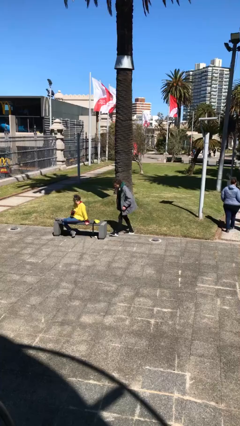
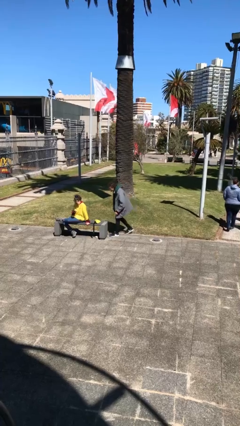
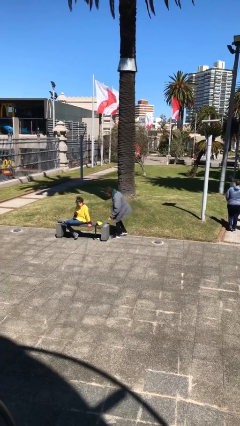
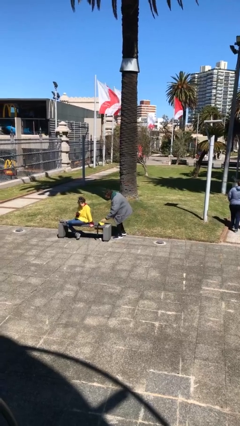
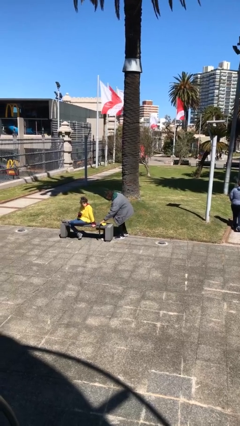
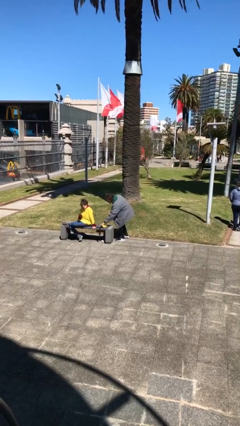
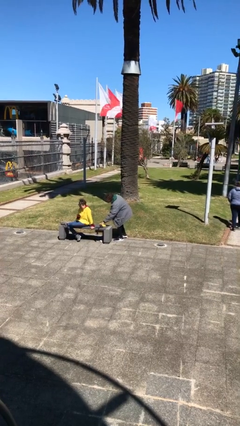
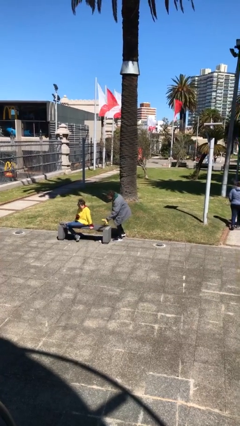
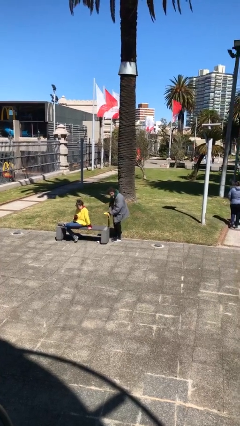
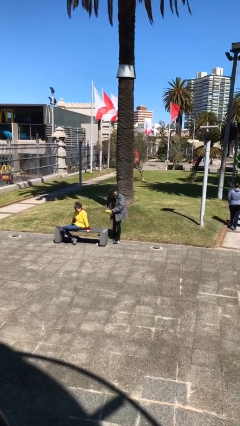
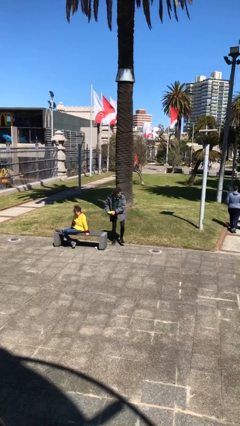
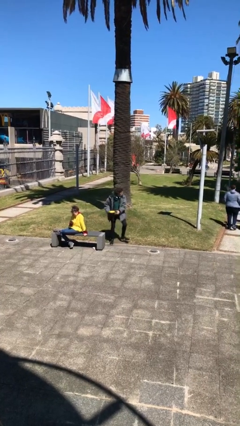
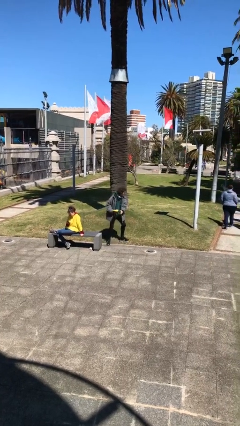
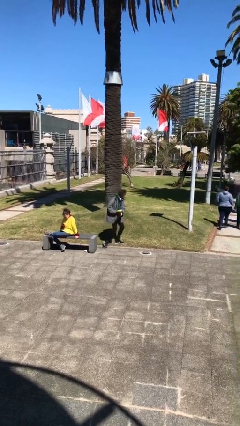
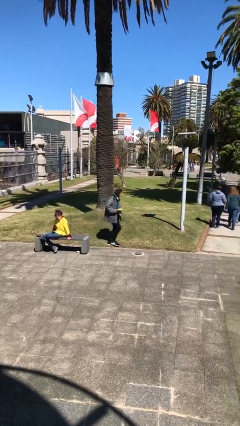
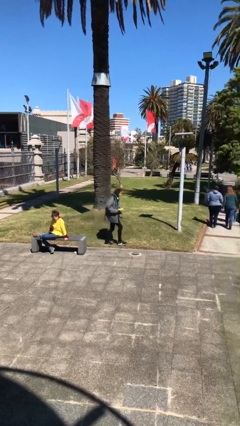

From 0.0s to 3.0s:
person steals object from person

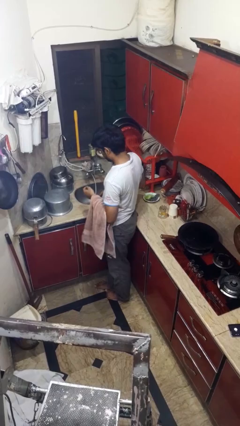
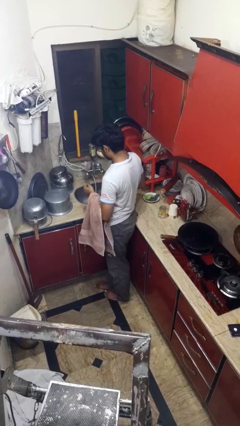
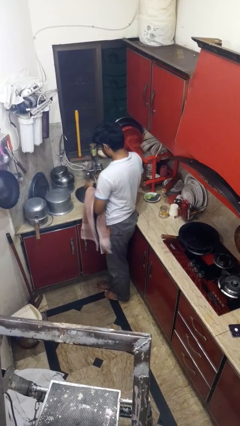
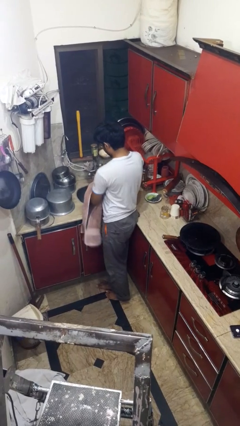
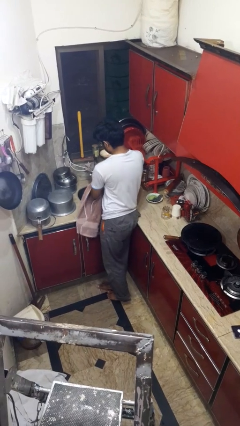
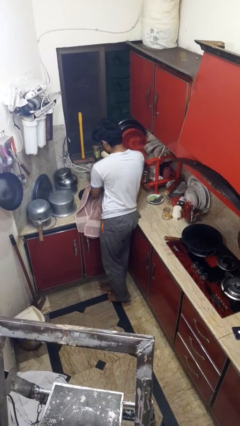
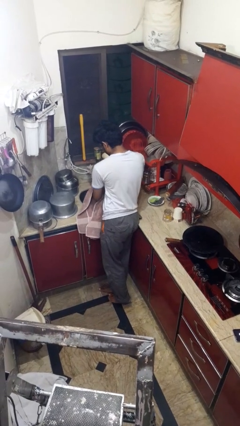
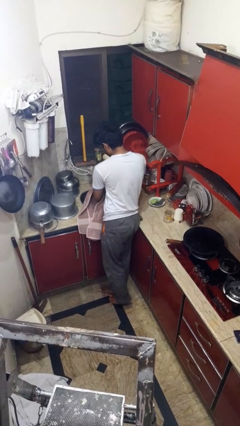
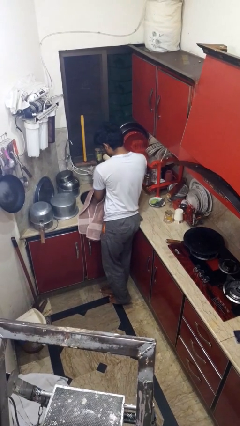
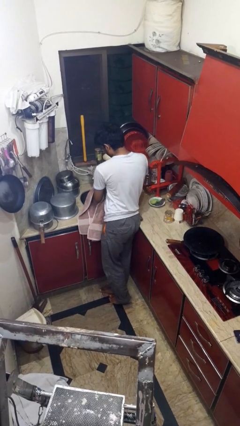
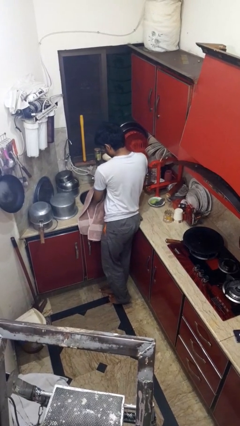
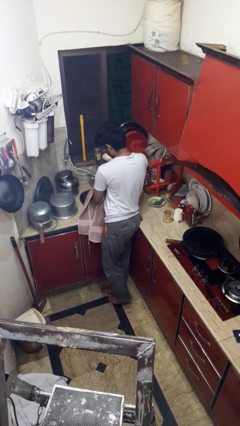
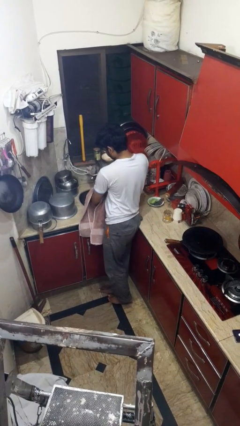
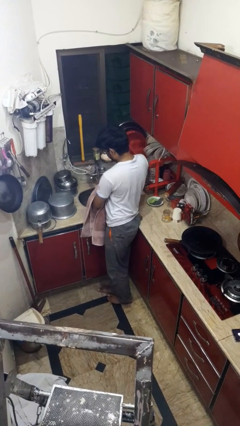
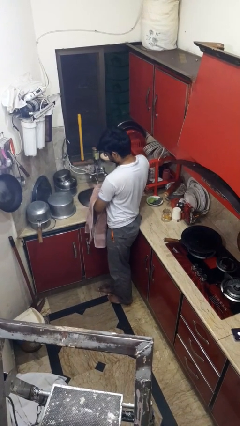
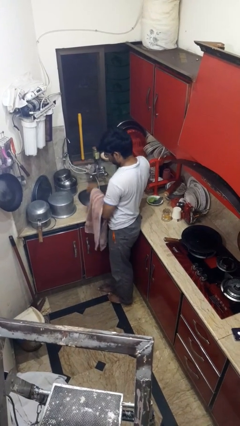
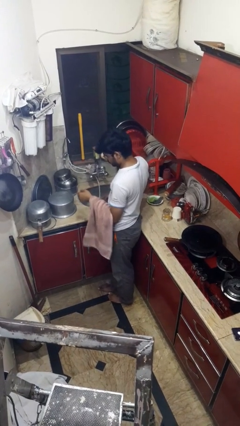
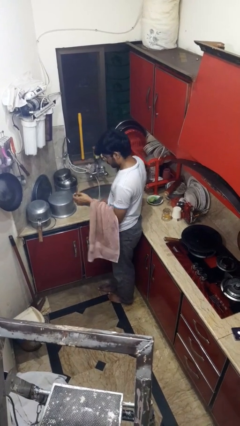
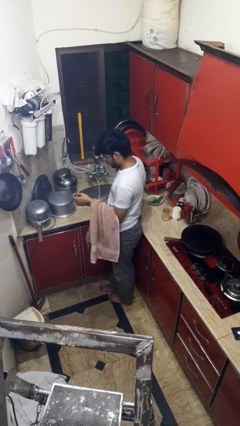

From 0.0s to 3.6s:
person washes hands

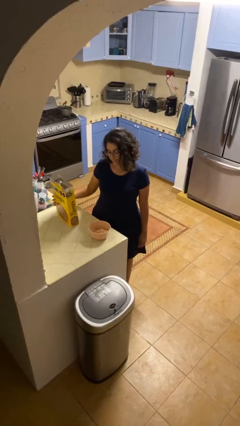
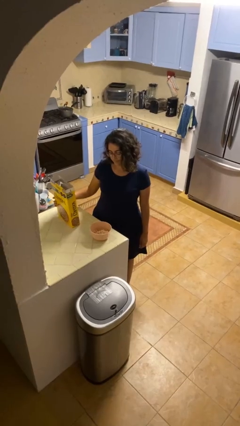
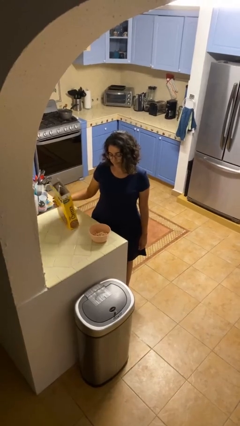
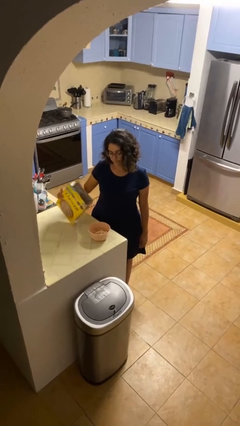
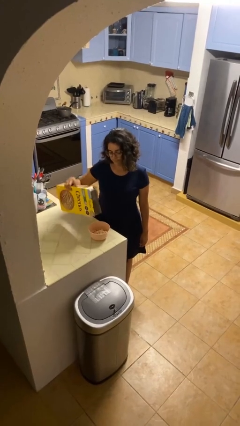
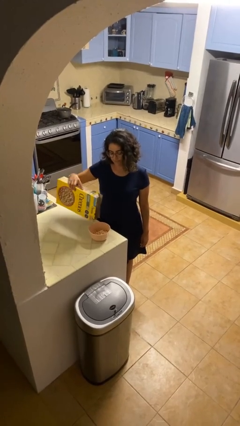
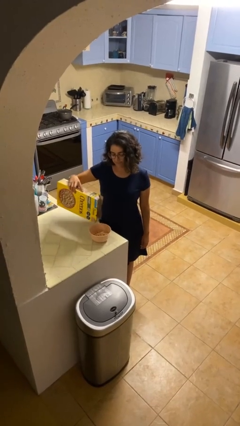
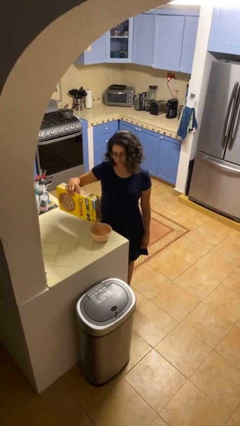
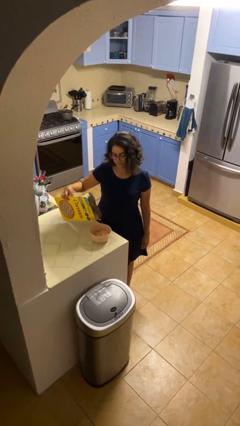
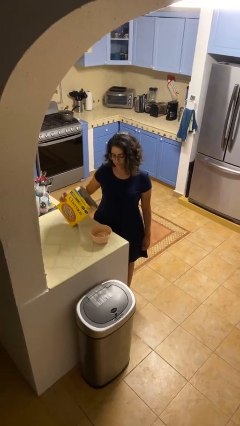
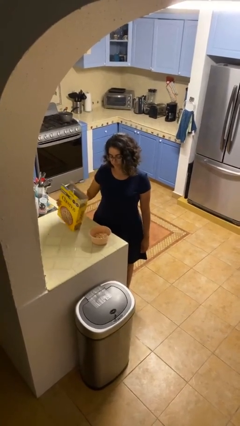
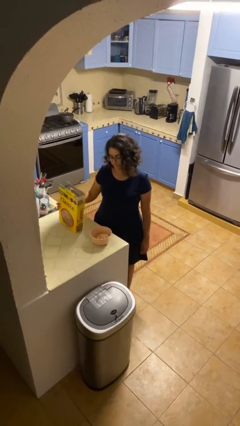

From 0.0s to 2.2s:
person pours into bowl

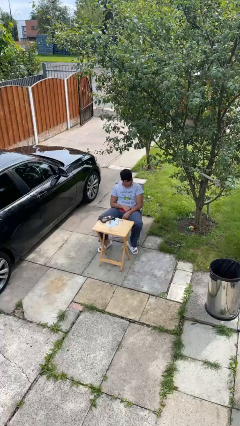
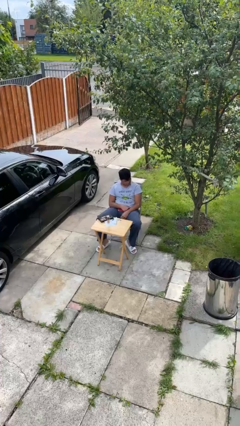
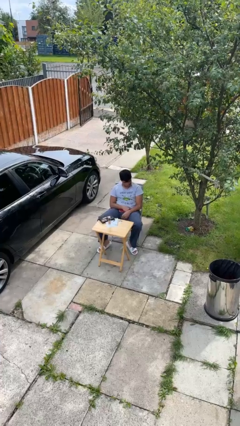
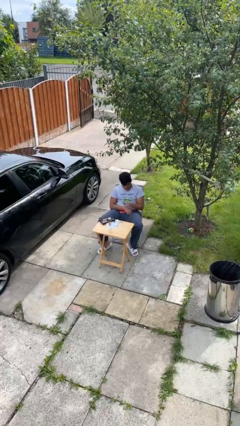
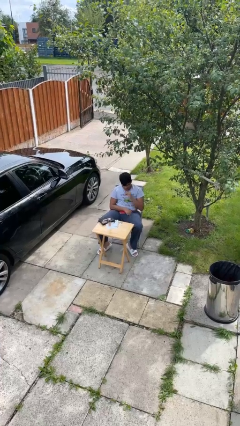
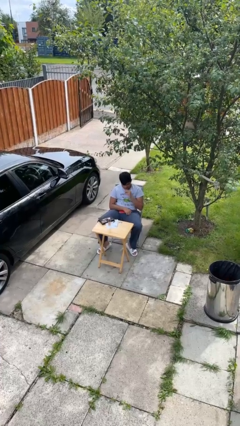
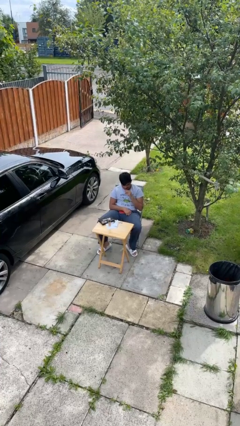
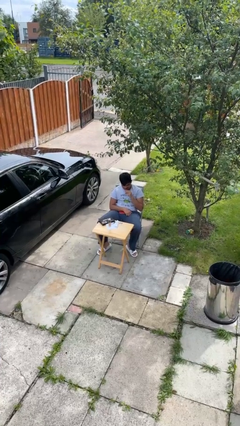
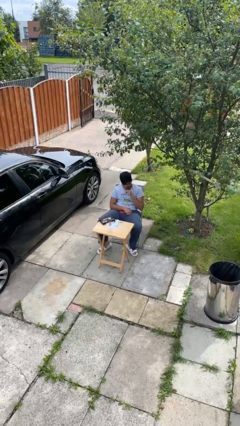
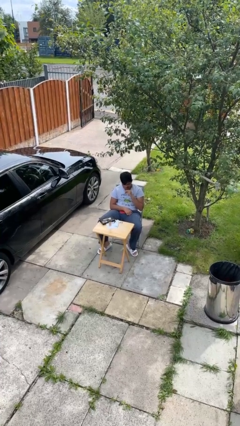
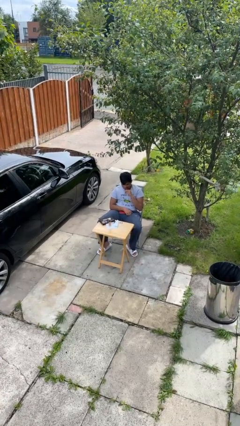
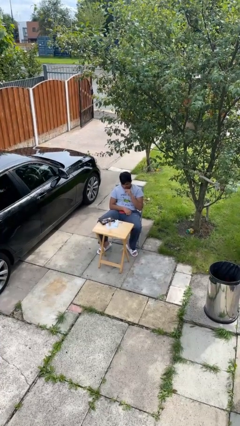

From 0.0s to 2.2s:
person applies lip makeup

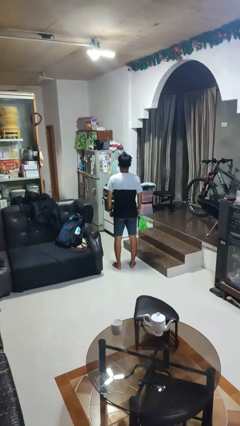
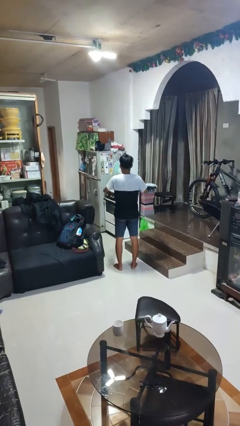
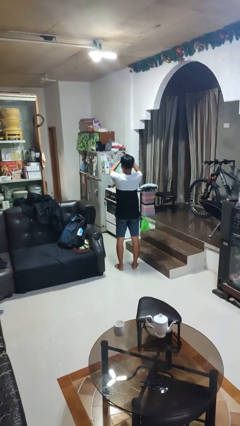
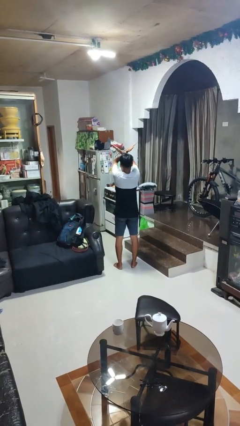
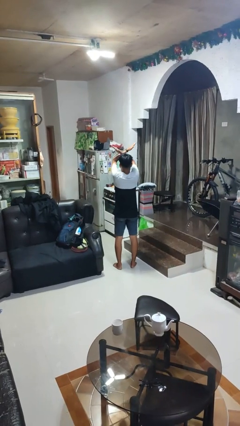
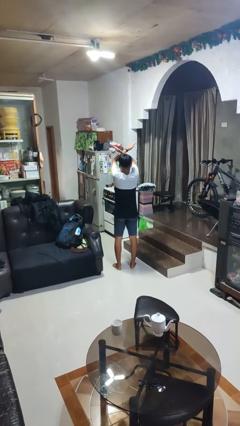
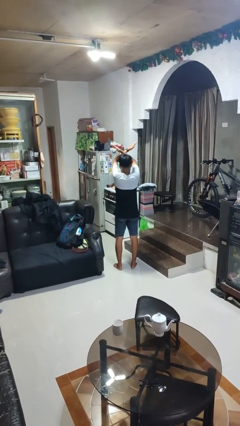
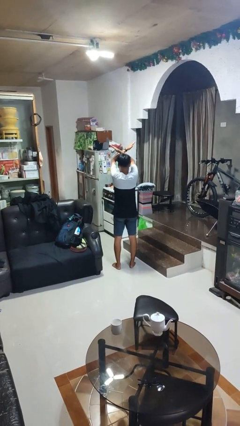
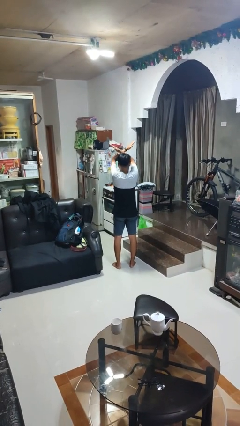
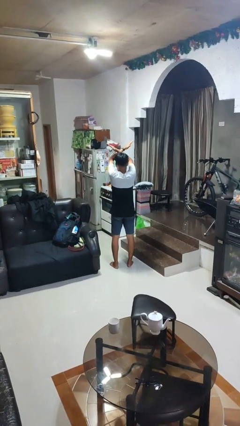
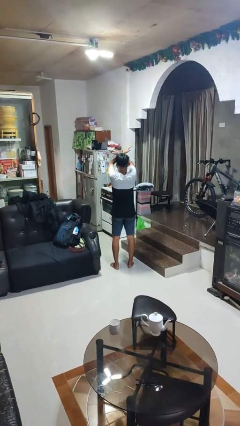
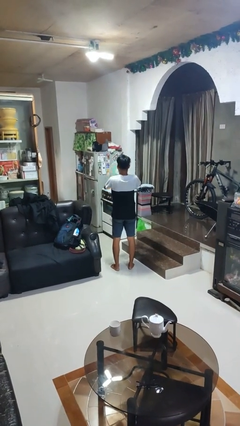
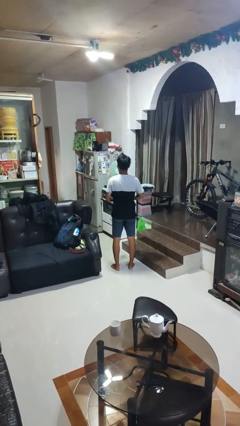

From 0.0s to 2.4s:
person gestures arms x

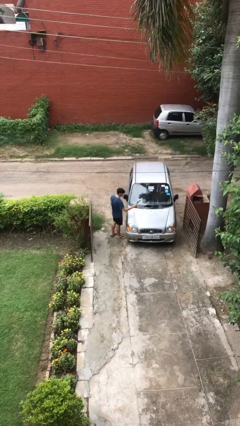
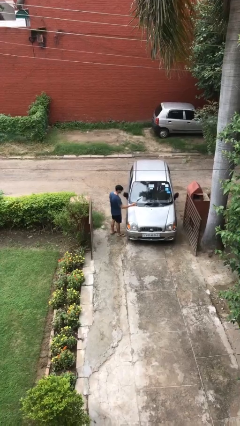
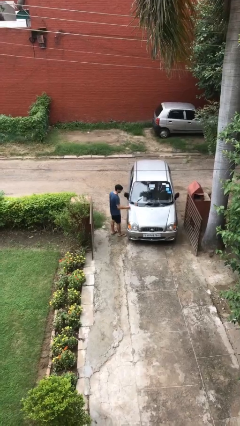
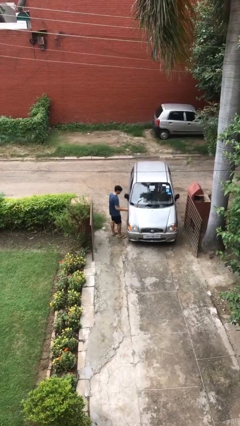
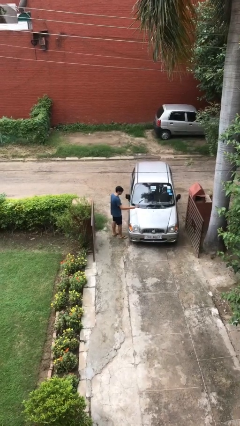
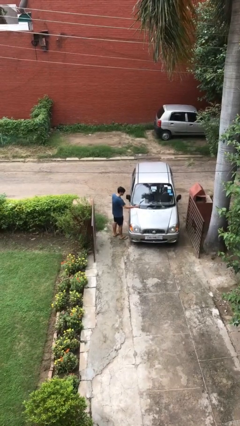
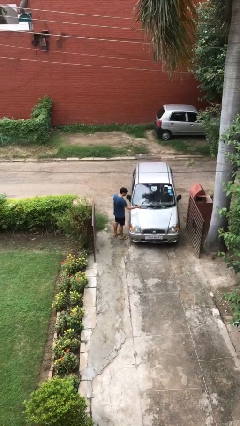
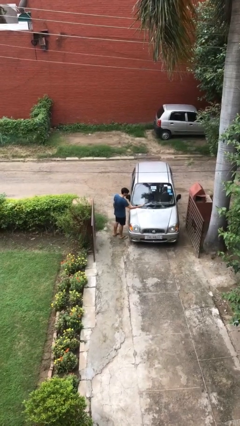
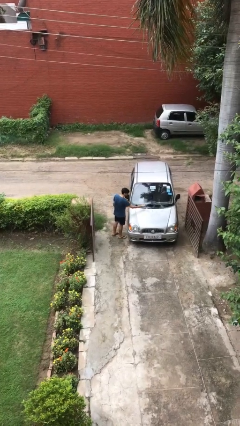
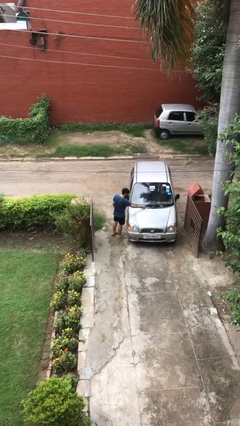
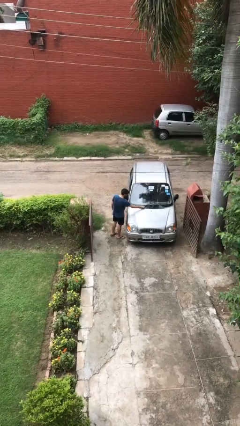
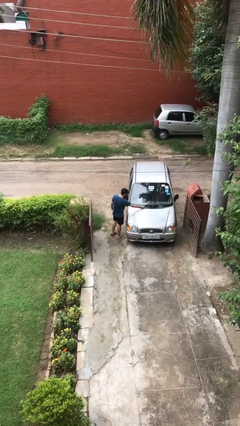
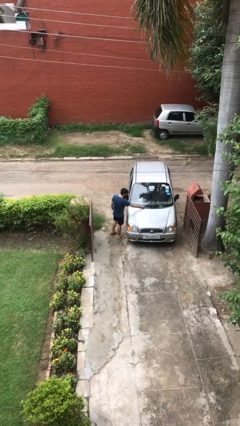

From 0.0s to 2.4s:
person flips down car wipers

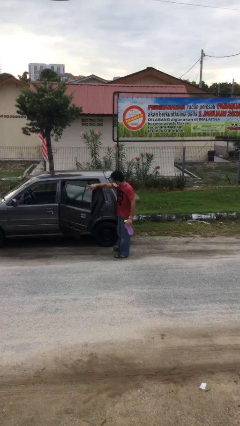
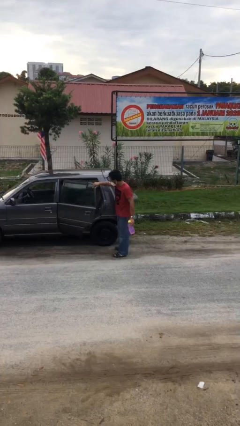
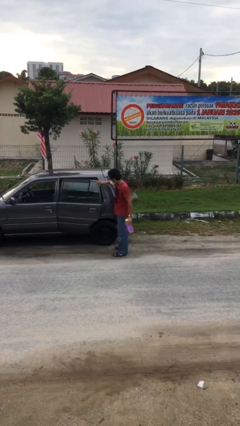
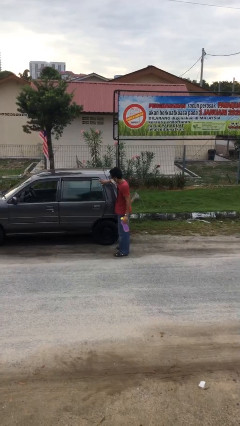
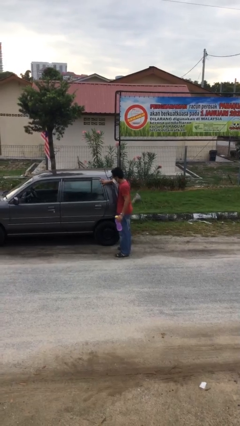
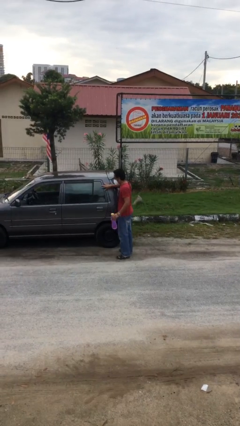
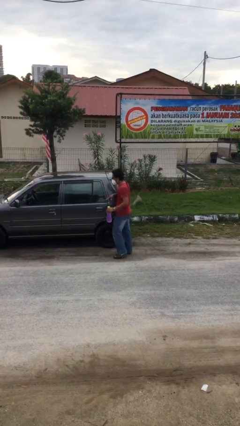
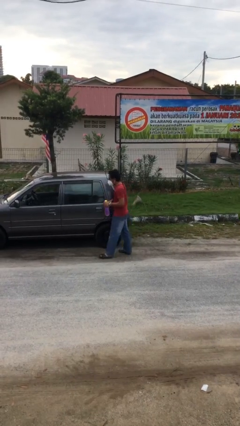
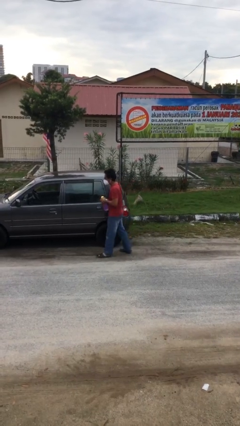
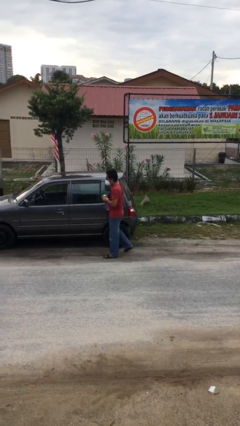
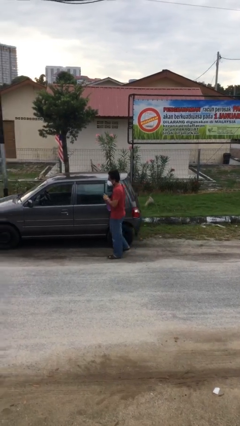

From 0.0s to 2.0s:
person closes car door
